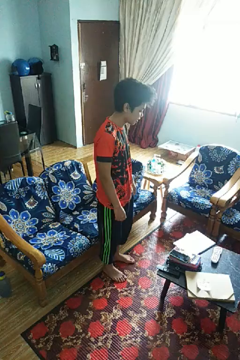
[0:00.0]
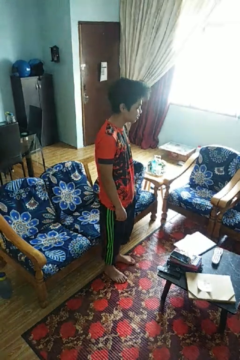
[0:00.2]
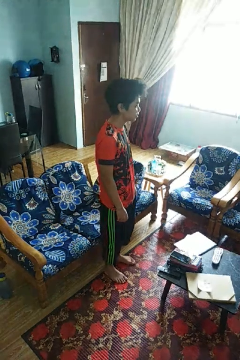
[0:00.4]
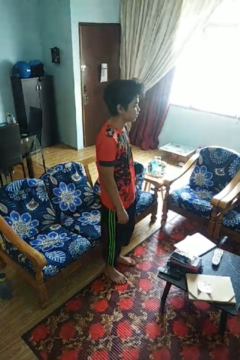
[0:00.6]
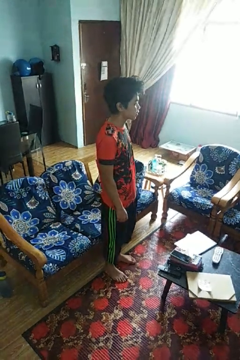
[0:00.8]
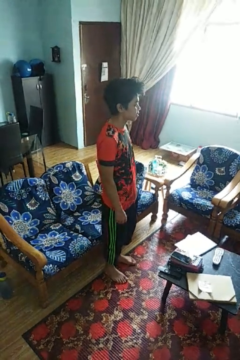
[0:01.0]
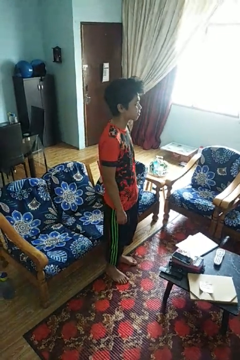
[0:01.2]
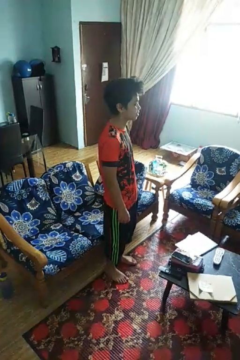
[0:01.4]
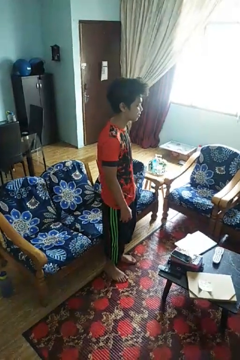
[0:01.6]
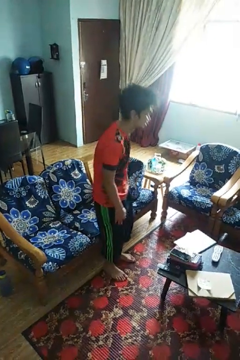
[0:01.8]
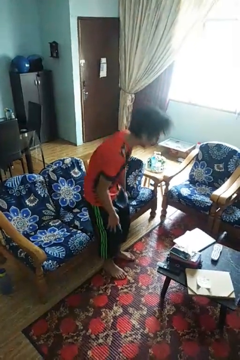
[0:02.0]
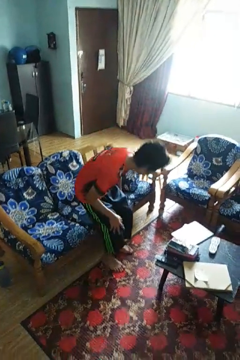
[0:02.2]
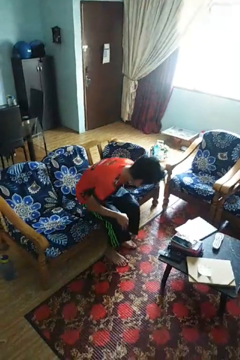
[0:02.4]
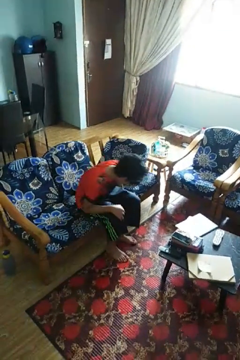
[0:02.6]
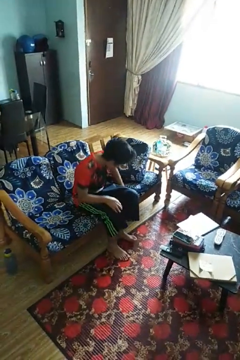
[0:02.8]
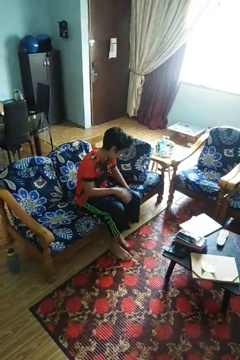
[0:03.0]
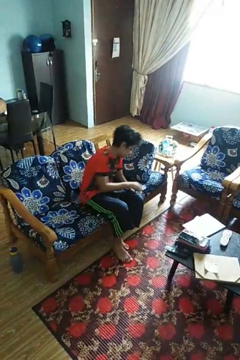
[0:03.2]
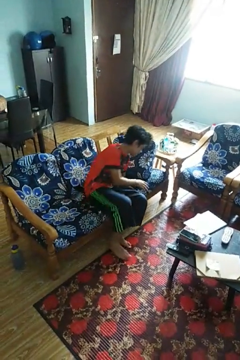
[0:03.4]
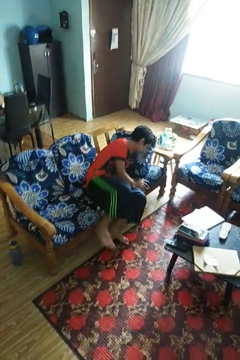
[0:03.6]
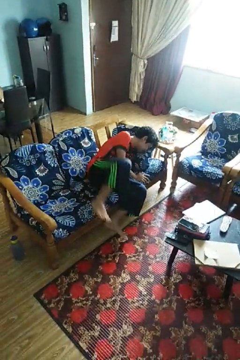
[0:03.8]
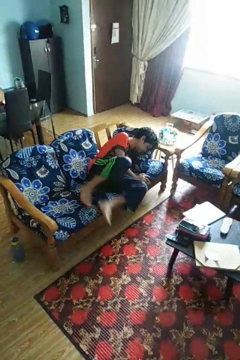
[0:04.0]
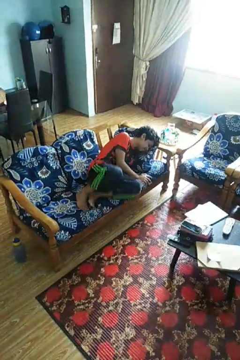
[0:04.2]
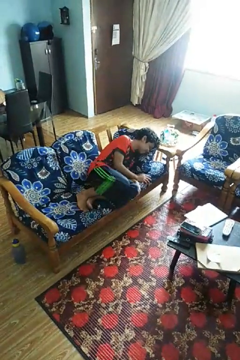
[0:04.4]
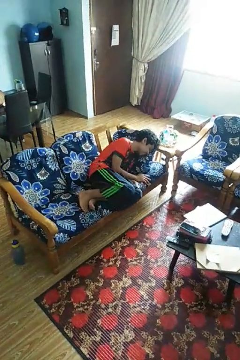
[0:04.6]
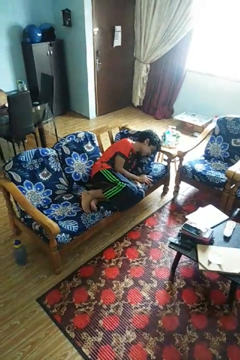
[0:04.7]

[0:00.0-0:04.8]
person lies down on couch

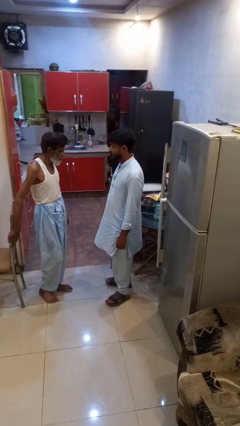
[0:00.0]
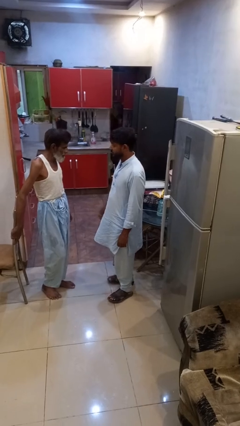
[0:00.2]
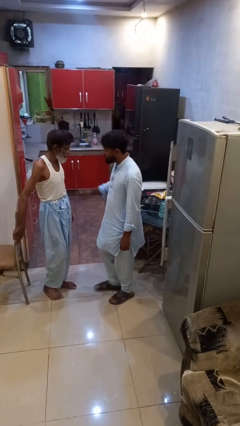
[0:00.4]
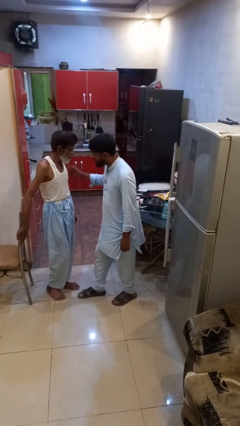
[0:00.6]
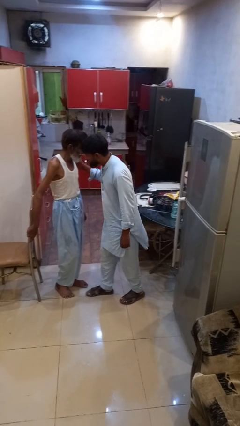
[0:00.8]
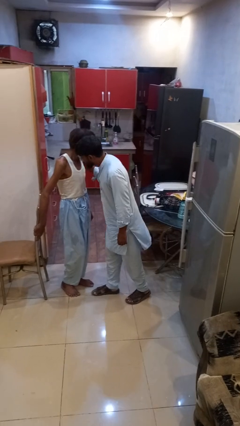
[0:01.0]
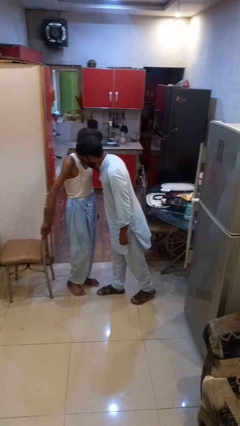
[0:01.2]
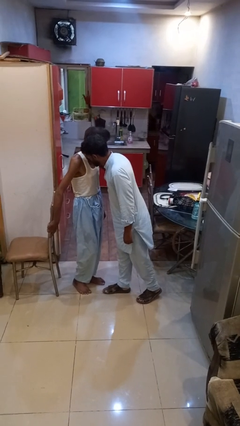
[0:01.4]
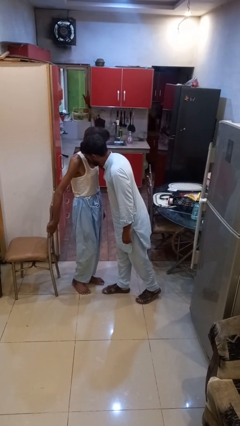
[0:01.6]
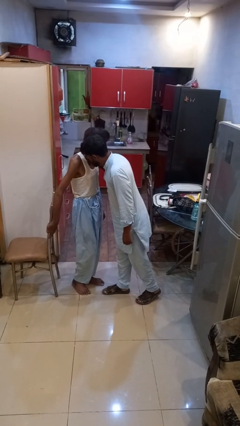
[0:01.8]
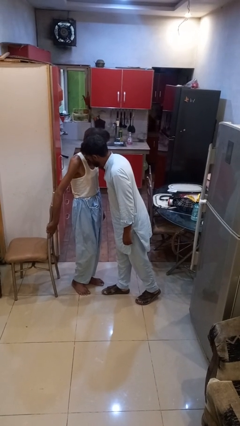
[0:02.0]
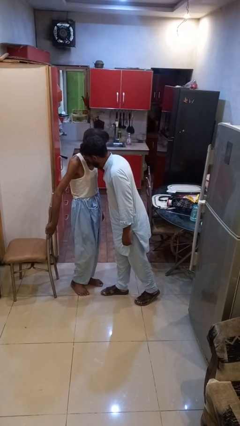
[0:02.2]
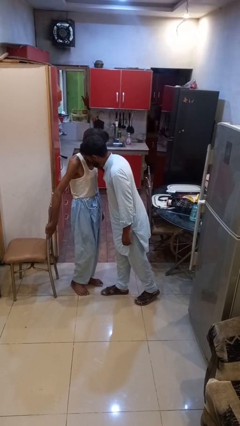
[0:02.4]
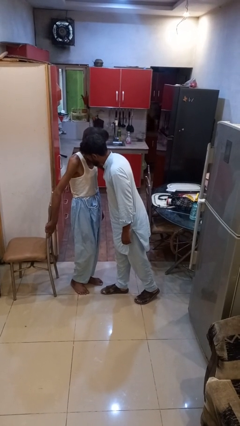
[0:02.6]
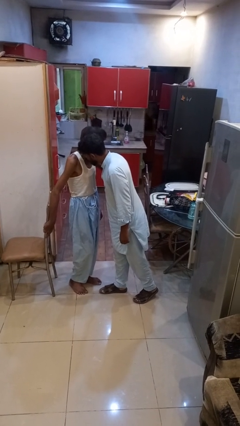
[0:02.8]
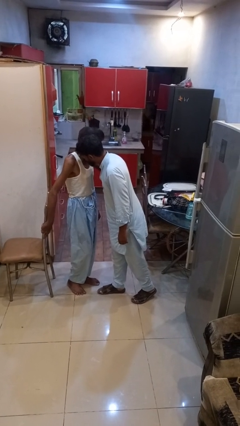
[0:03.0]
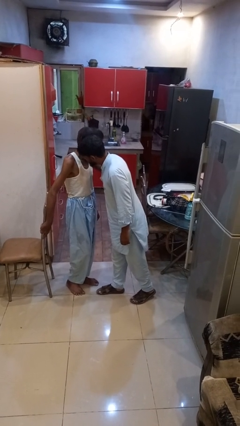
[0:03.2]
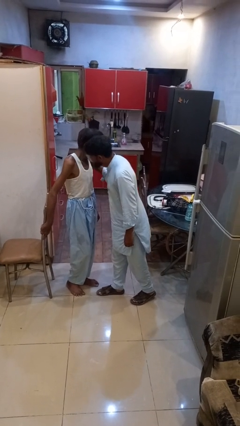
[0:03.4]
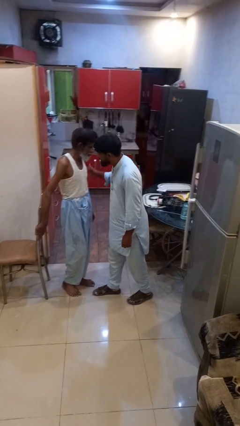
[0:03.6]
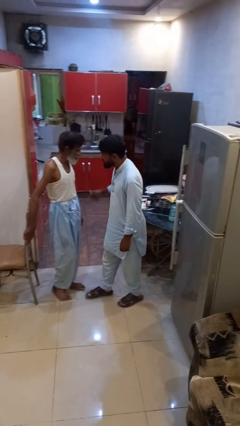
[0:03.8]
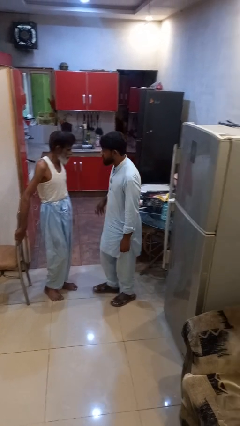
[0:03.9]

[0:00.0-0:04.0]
person kisses cheek of person

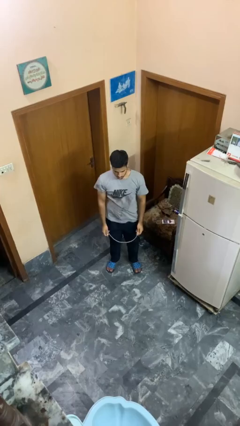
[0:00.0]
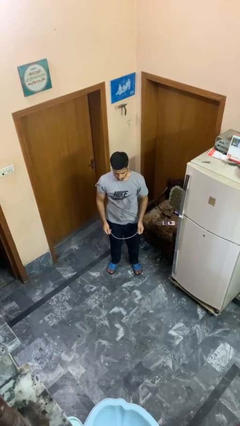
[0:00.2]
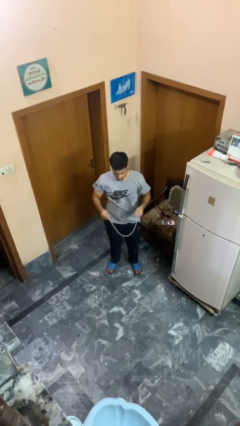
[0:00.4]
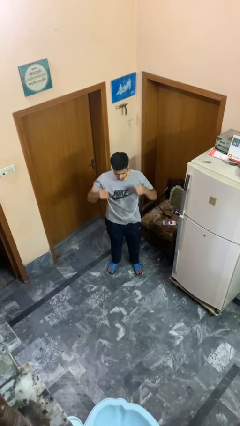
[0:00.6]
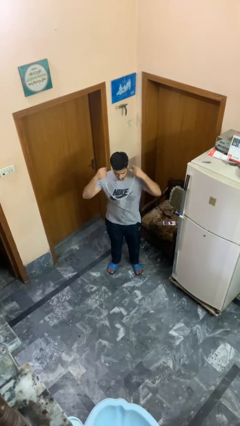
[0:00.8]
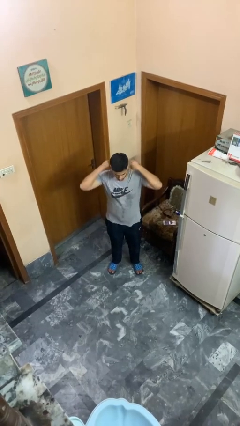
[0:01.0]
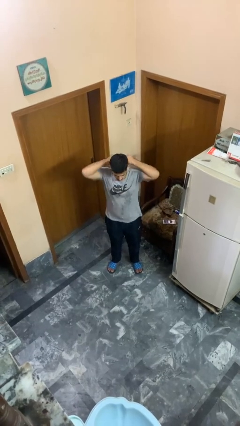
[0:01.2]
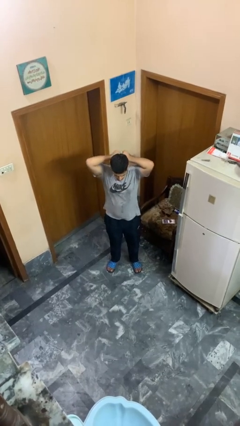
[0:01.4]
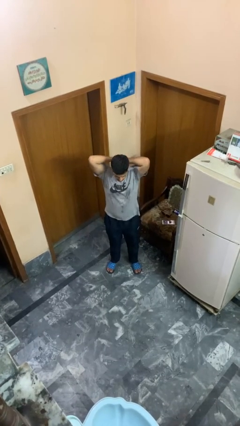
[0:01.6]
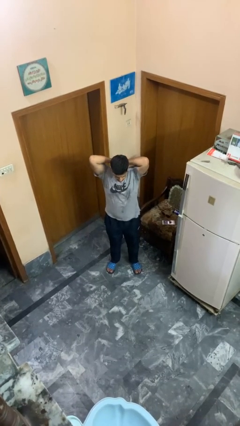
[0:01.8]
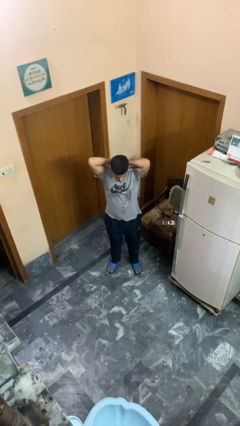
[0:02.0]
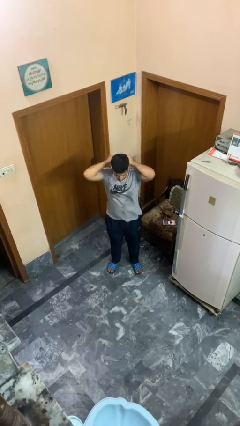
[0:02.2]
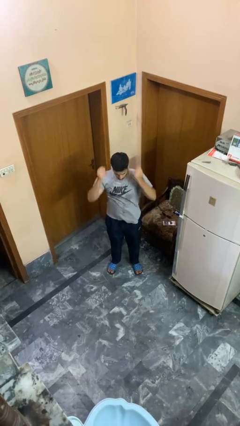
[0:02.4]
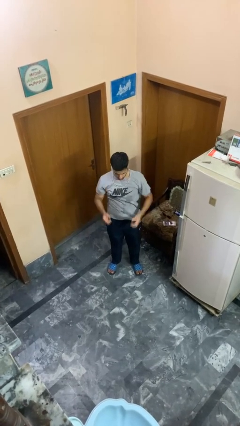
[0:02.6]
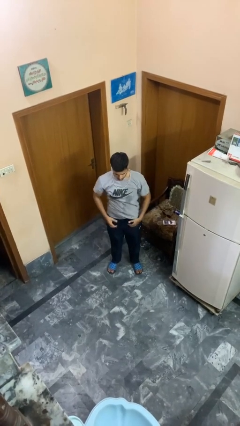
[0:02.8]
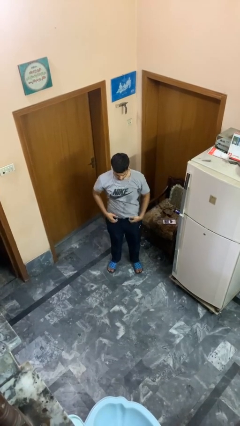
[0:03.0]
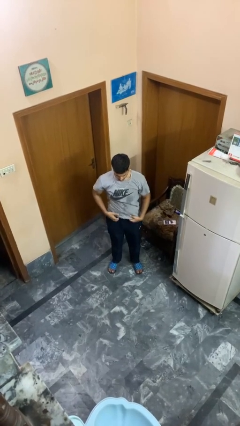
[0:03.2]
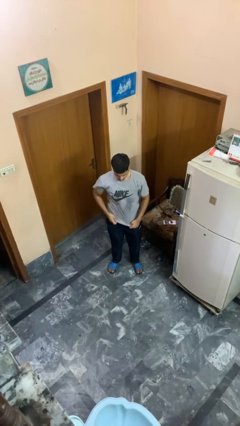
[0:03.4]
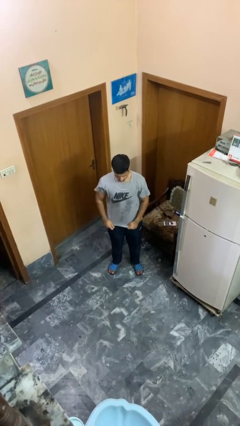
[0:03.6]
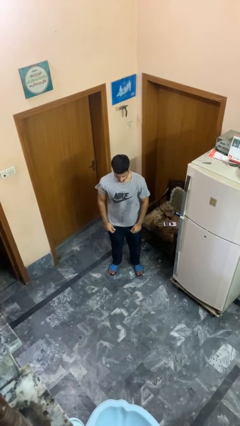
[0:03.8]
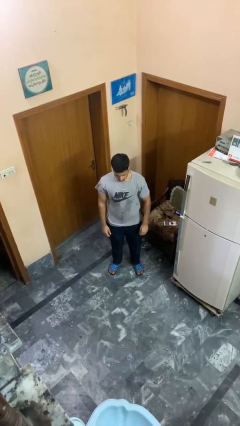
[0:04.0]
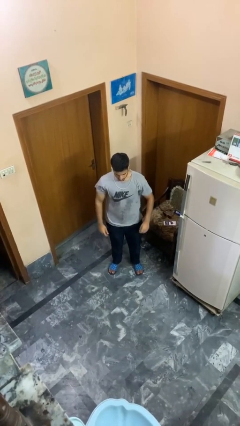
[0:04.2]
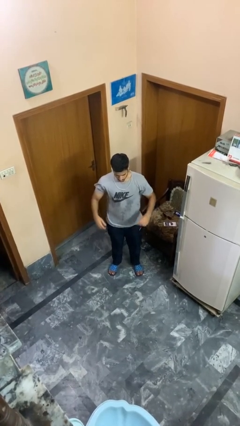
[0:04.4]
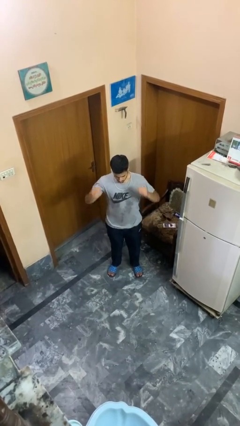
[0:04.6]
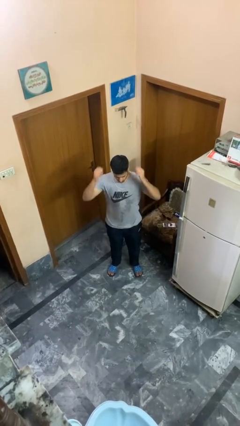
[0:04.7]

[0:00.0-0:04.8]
person puts on necklace

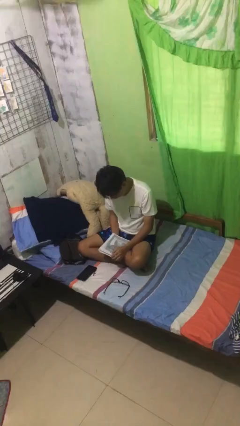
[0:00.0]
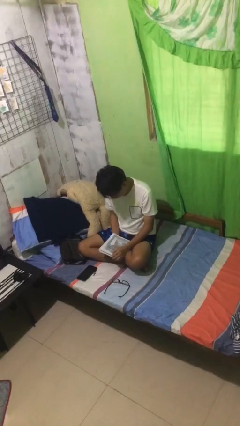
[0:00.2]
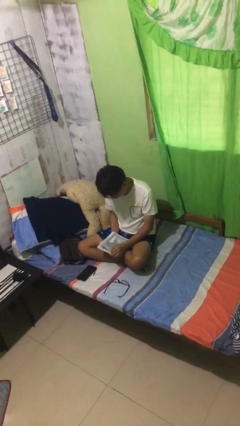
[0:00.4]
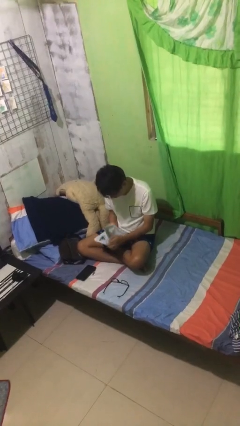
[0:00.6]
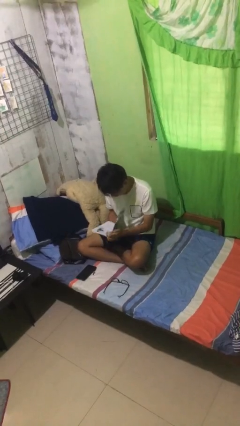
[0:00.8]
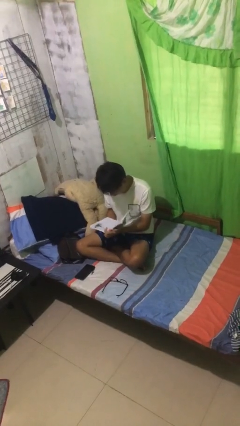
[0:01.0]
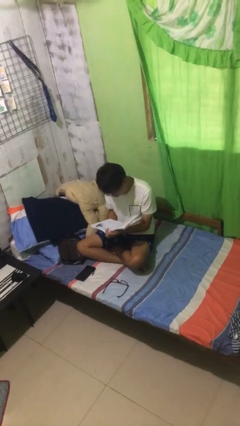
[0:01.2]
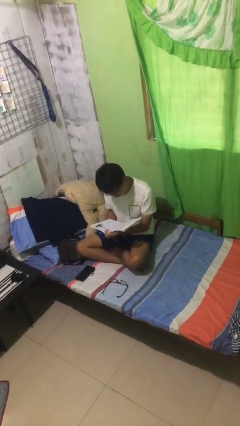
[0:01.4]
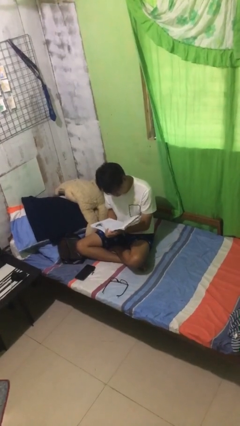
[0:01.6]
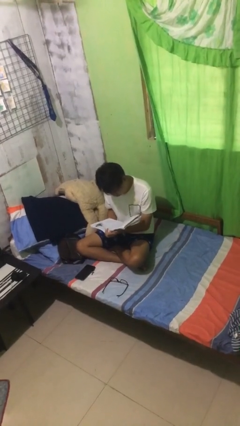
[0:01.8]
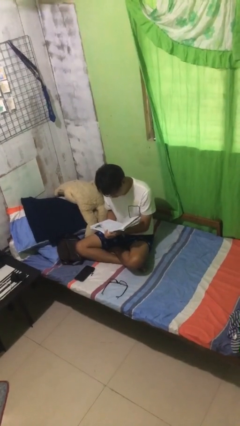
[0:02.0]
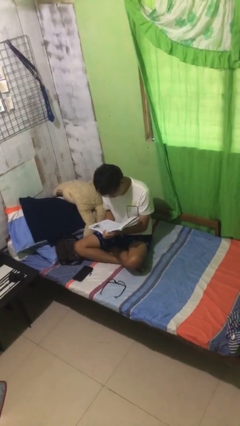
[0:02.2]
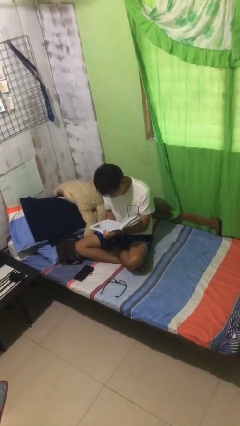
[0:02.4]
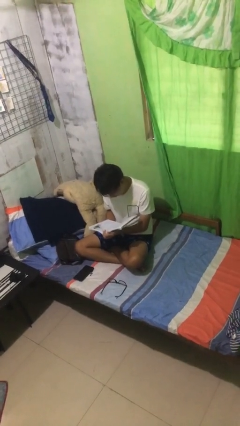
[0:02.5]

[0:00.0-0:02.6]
person reads document

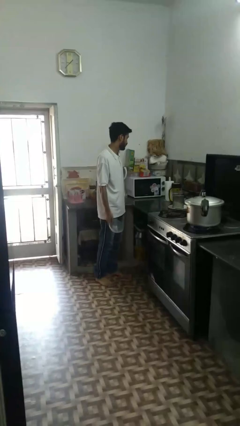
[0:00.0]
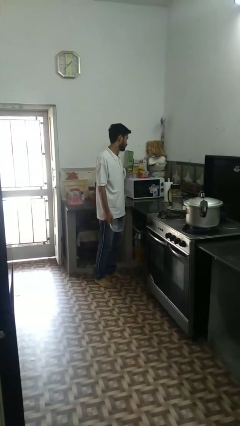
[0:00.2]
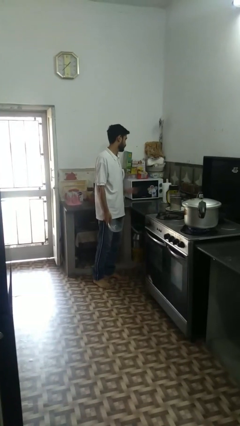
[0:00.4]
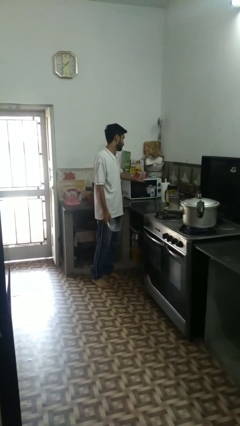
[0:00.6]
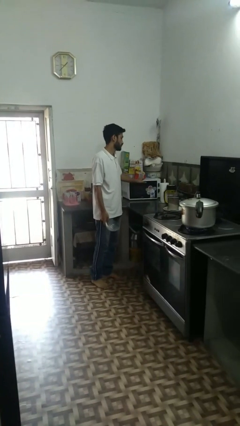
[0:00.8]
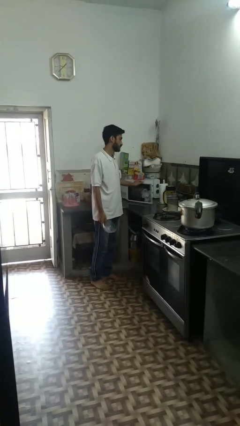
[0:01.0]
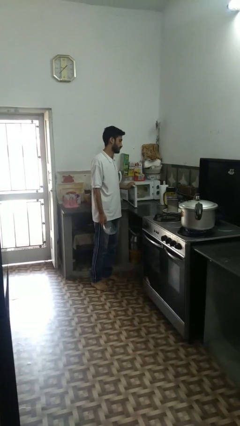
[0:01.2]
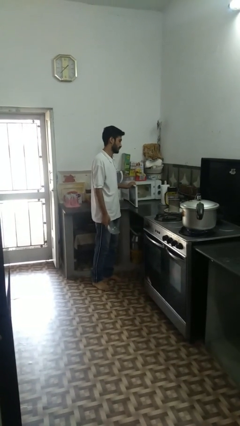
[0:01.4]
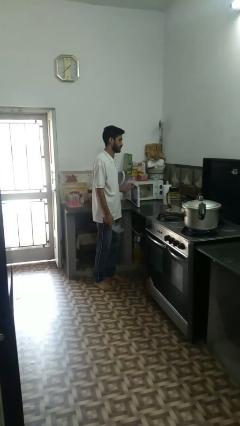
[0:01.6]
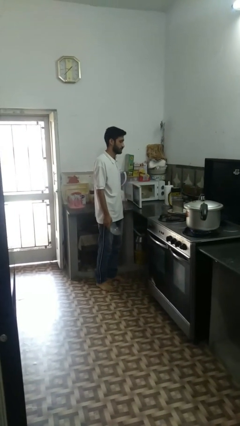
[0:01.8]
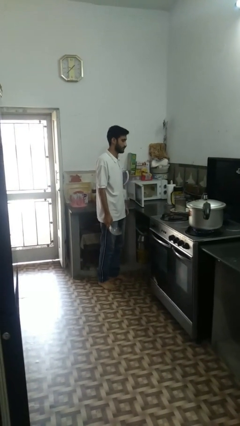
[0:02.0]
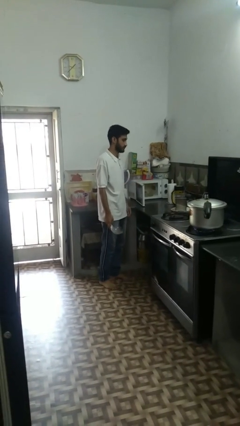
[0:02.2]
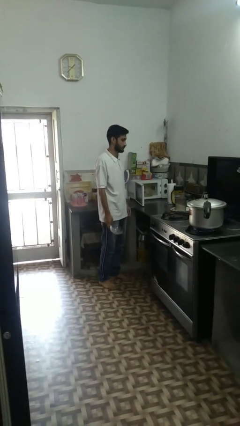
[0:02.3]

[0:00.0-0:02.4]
person opens microwave
